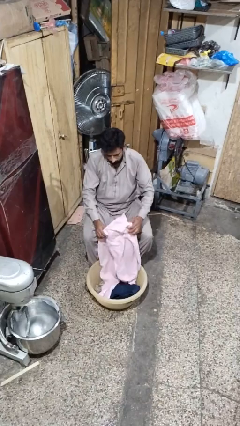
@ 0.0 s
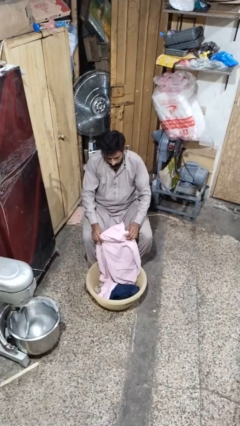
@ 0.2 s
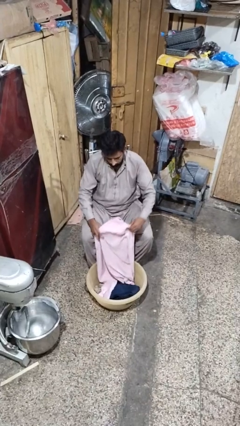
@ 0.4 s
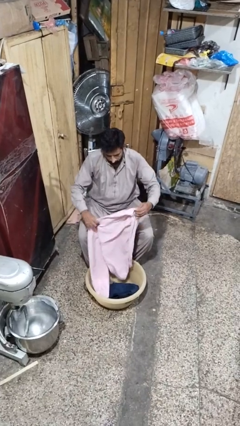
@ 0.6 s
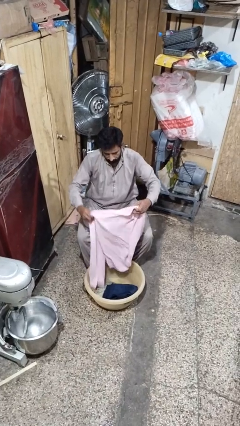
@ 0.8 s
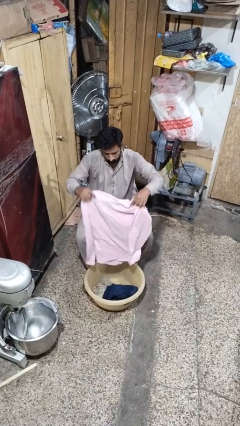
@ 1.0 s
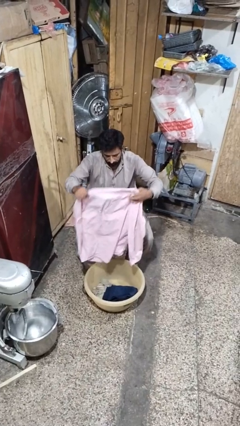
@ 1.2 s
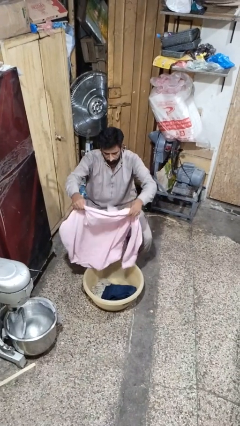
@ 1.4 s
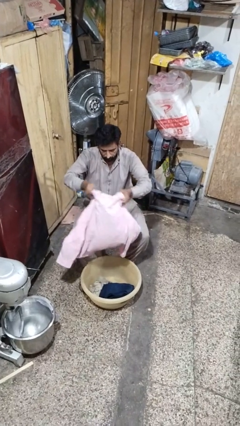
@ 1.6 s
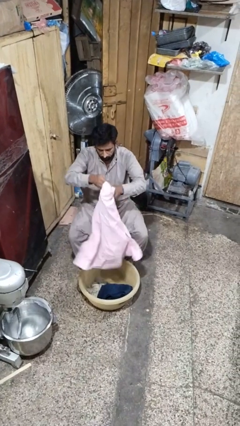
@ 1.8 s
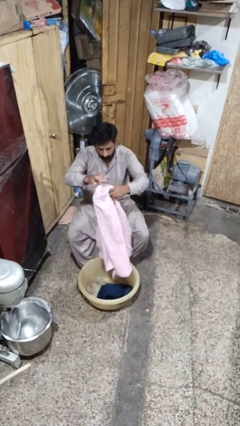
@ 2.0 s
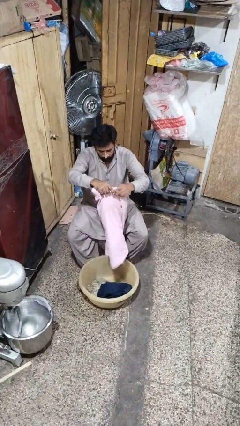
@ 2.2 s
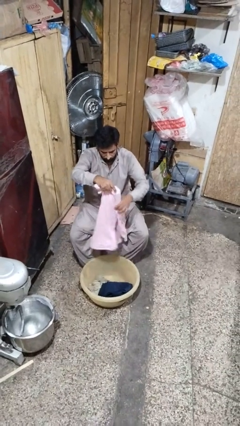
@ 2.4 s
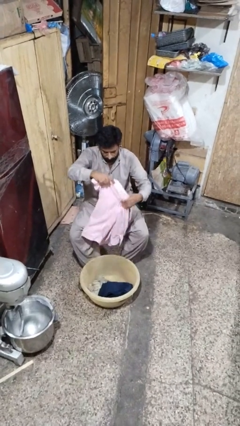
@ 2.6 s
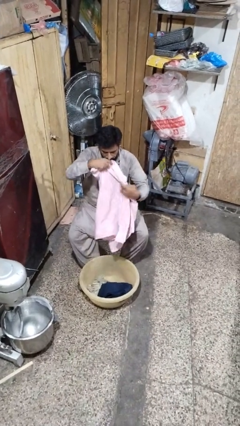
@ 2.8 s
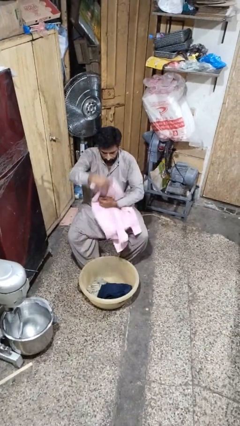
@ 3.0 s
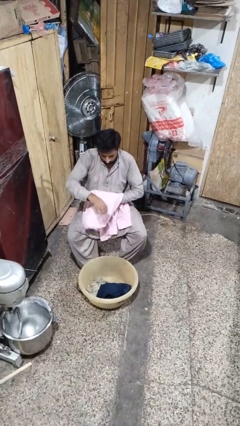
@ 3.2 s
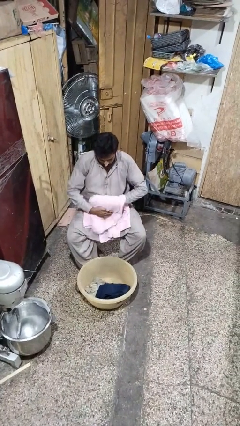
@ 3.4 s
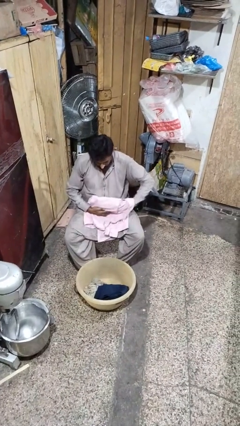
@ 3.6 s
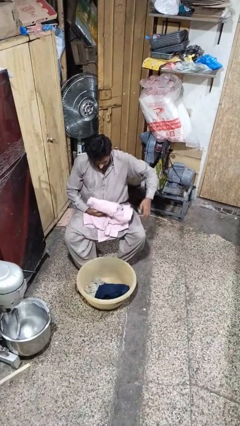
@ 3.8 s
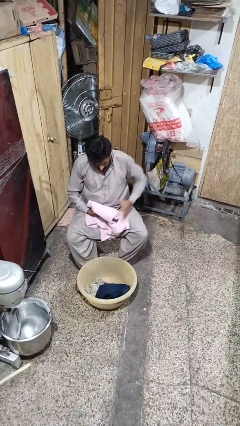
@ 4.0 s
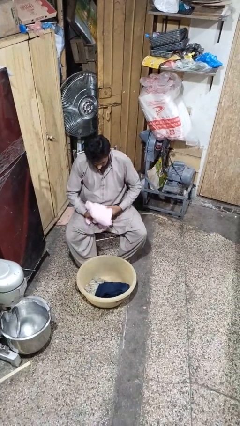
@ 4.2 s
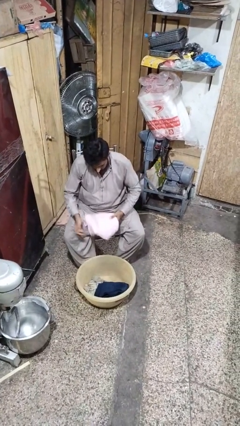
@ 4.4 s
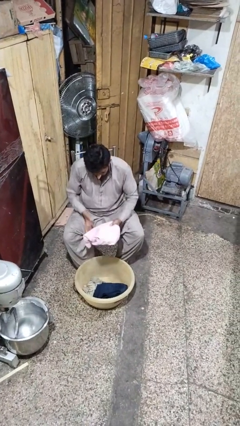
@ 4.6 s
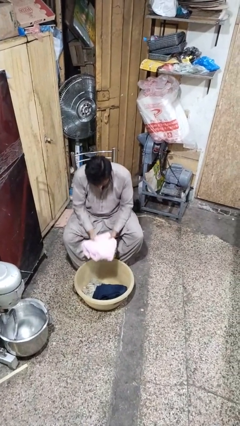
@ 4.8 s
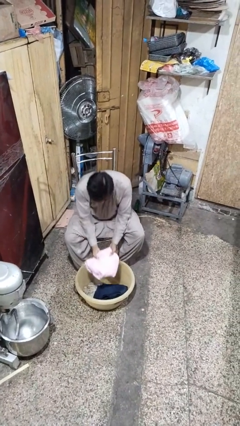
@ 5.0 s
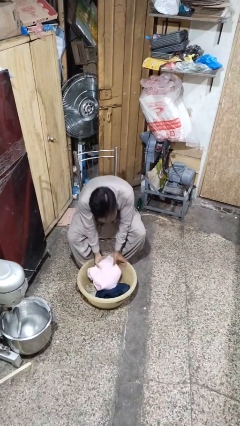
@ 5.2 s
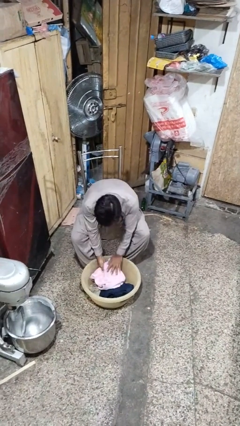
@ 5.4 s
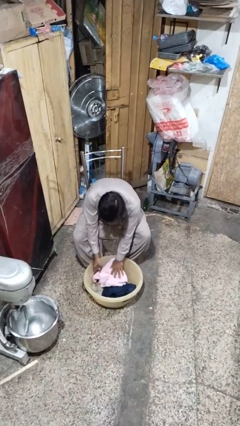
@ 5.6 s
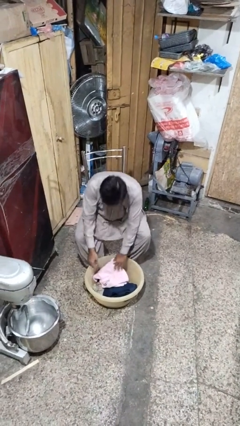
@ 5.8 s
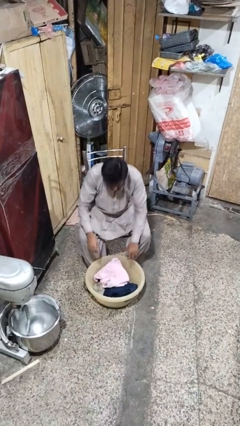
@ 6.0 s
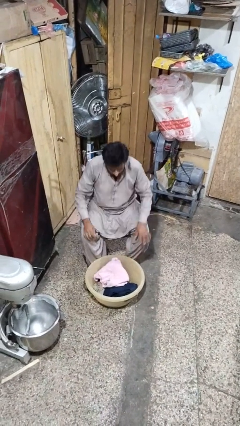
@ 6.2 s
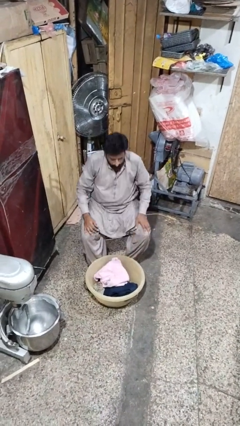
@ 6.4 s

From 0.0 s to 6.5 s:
person folds shirt

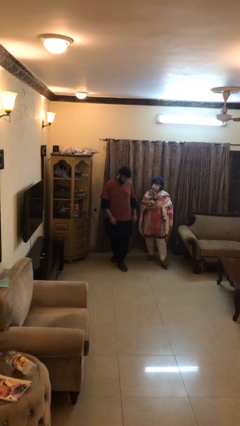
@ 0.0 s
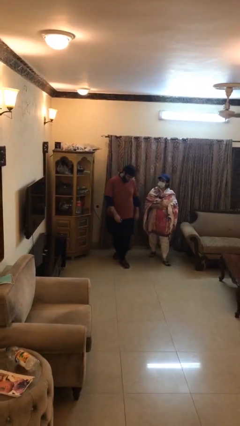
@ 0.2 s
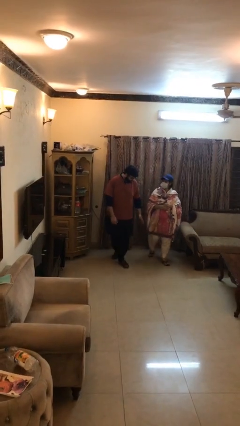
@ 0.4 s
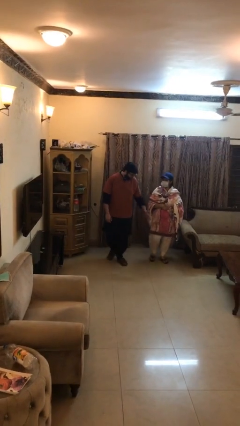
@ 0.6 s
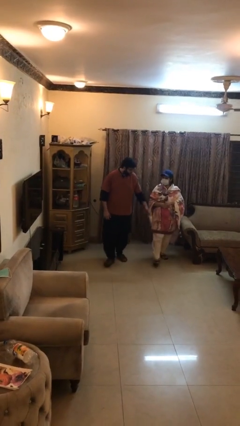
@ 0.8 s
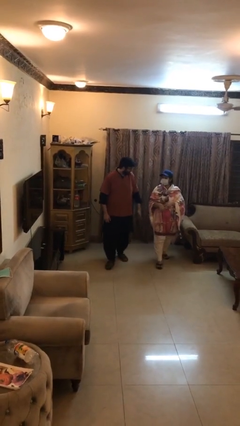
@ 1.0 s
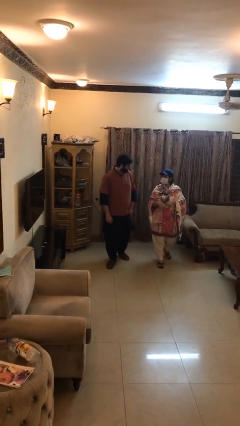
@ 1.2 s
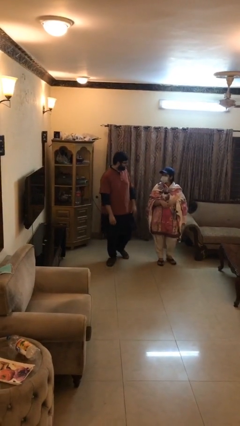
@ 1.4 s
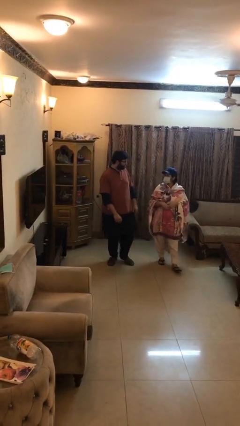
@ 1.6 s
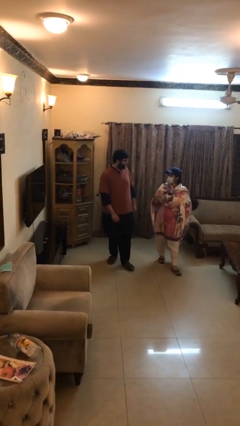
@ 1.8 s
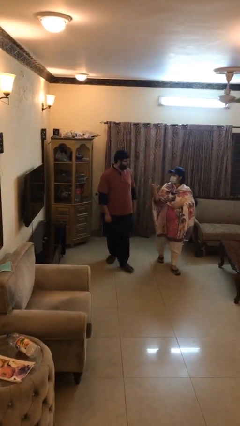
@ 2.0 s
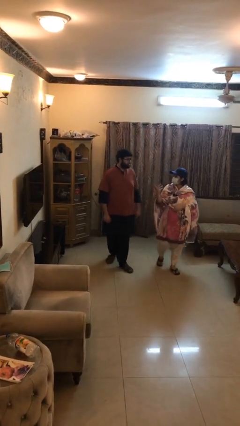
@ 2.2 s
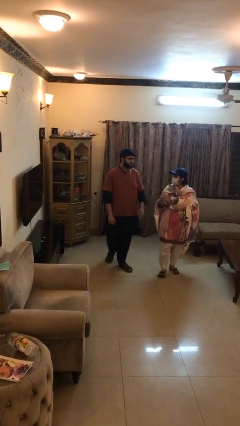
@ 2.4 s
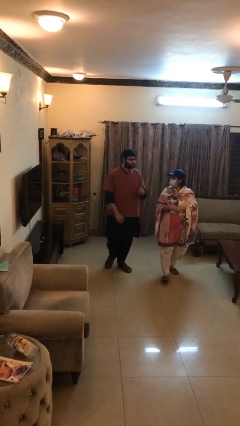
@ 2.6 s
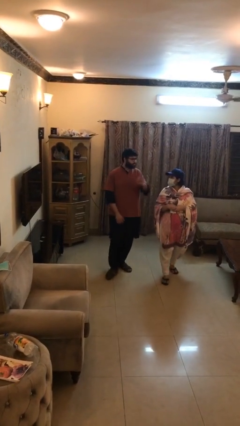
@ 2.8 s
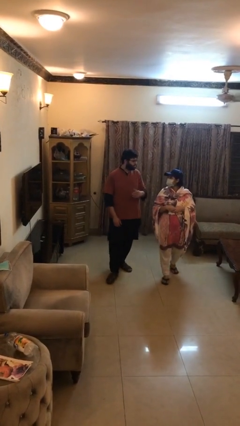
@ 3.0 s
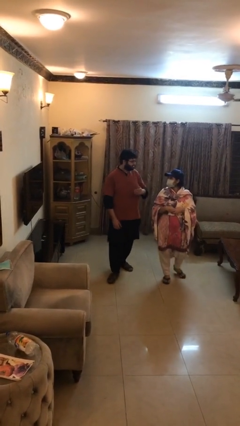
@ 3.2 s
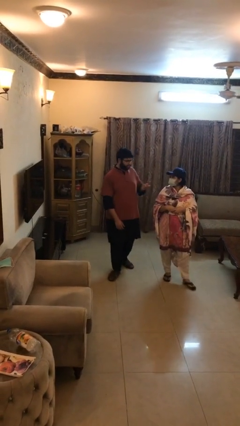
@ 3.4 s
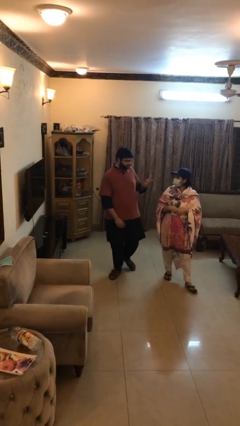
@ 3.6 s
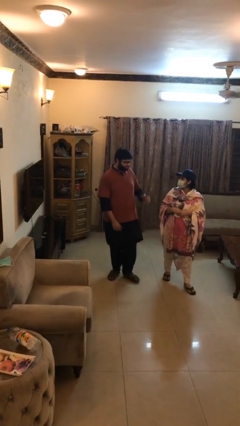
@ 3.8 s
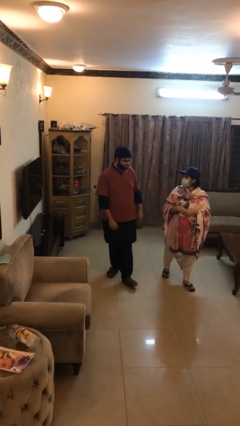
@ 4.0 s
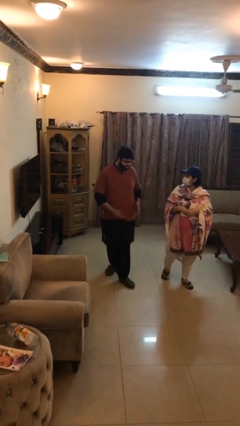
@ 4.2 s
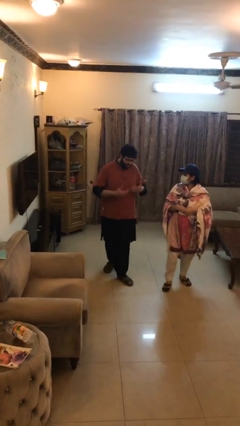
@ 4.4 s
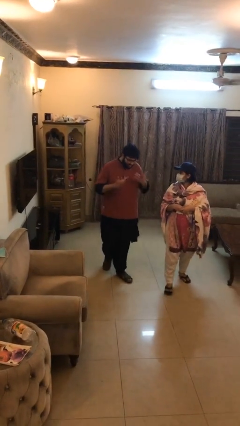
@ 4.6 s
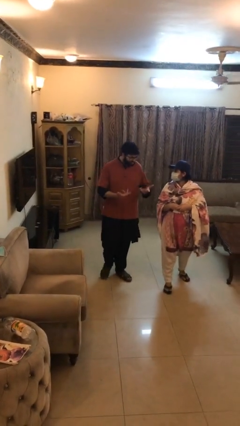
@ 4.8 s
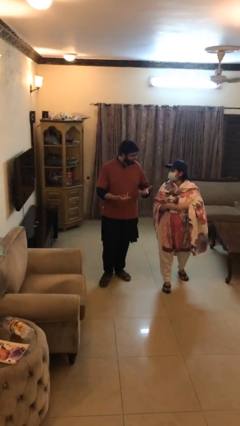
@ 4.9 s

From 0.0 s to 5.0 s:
person talks to person

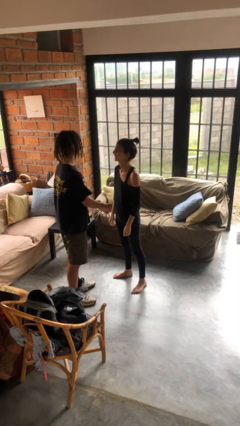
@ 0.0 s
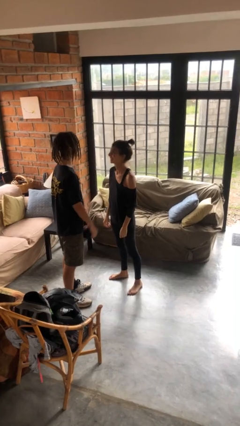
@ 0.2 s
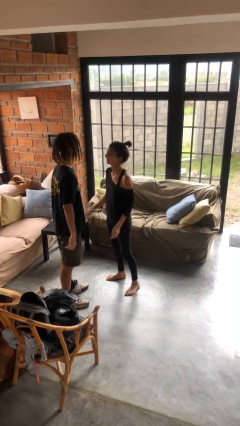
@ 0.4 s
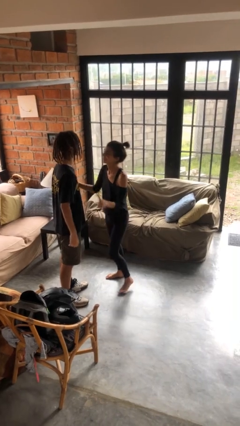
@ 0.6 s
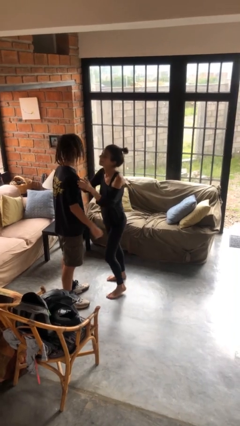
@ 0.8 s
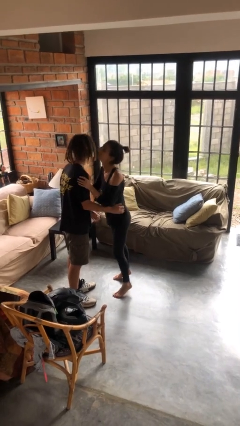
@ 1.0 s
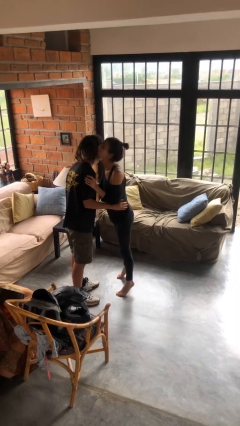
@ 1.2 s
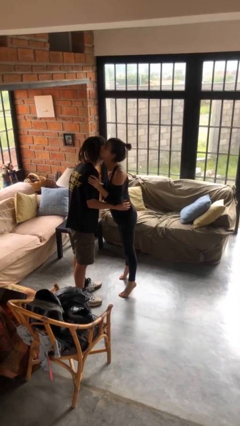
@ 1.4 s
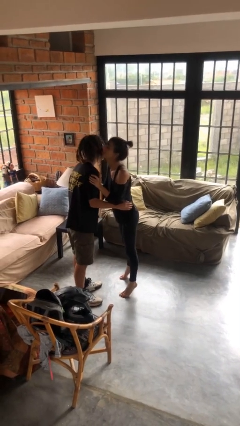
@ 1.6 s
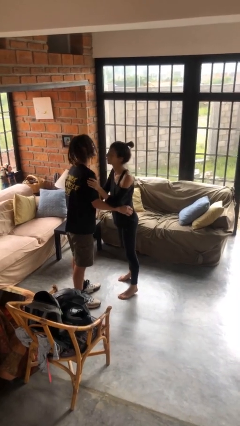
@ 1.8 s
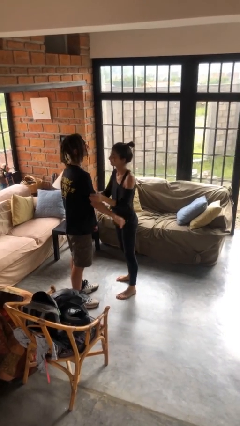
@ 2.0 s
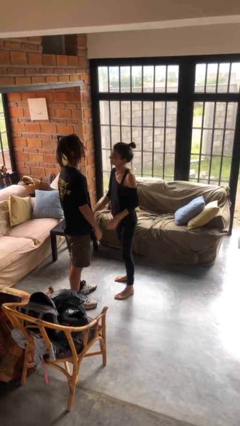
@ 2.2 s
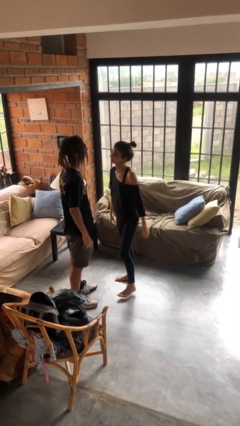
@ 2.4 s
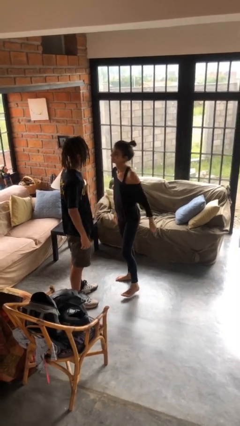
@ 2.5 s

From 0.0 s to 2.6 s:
person kisses cheek of person

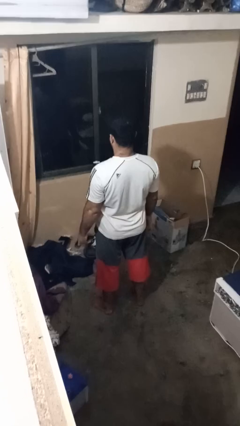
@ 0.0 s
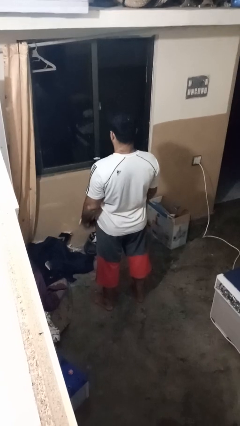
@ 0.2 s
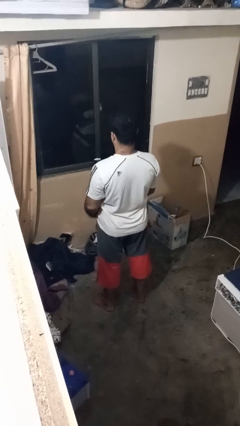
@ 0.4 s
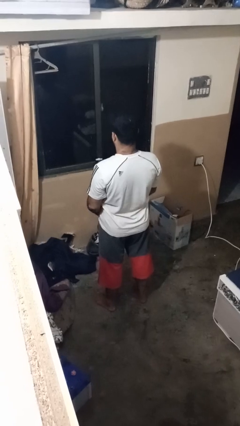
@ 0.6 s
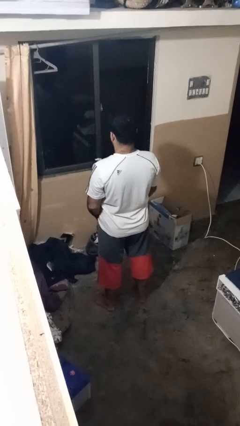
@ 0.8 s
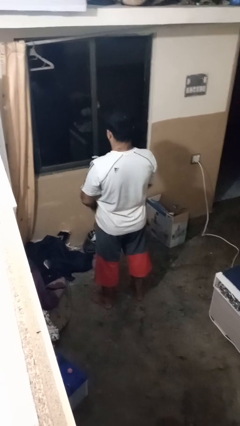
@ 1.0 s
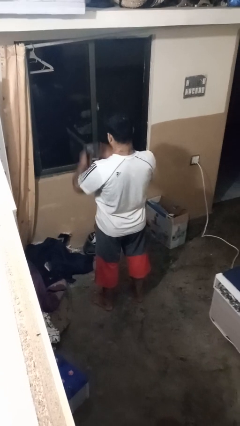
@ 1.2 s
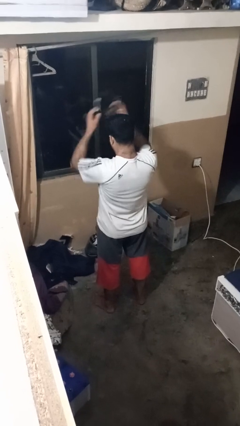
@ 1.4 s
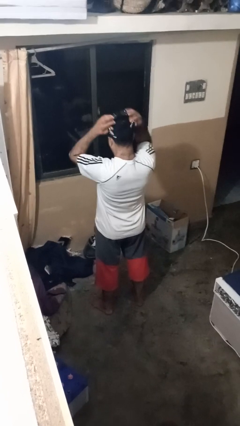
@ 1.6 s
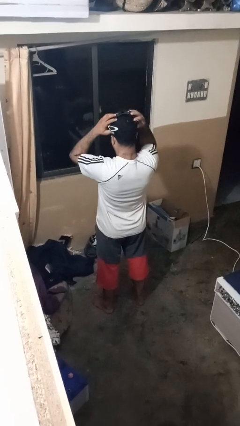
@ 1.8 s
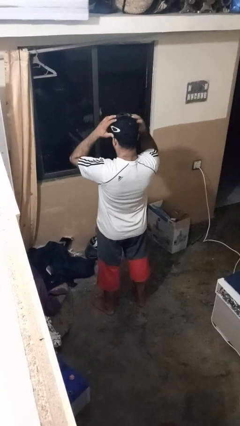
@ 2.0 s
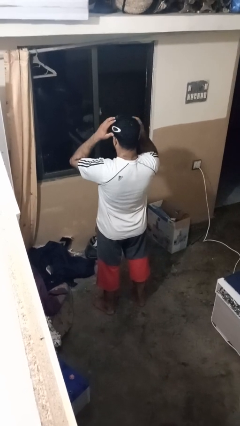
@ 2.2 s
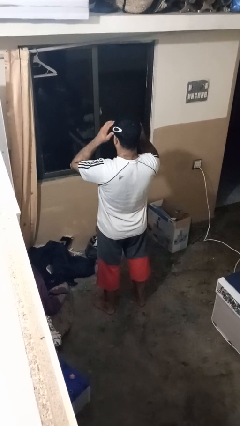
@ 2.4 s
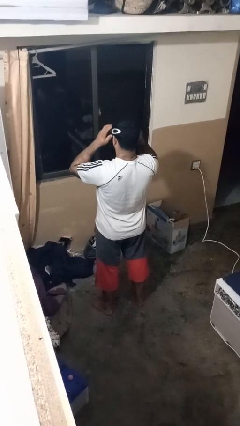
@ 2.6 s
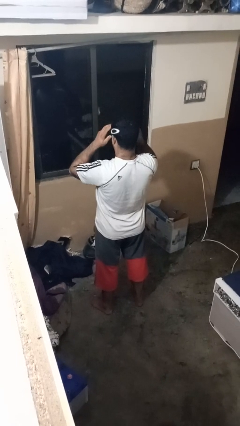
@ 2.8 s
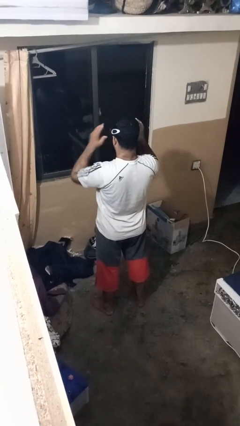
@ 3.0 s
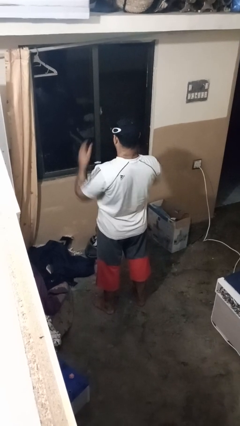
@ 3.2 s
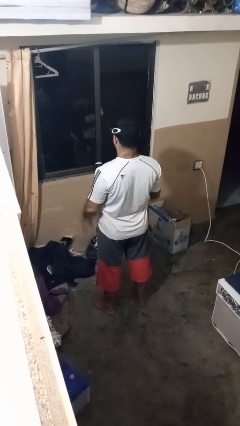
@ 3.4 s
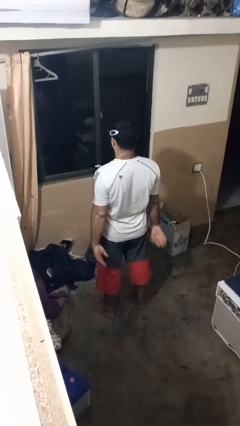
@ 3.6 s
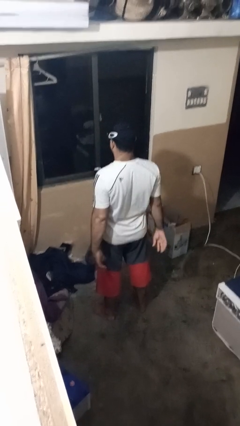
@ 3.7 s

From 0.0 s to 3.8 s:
person puts on sunglasses
